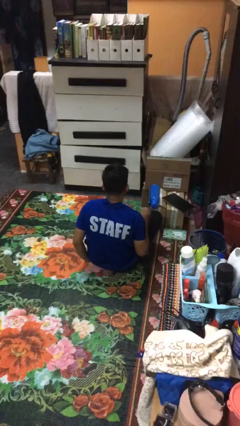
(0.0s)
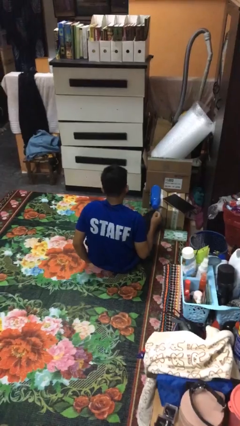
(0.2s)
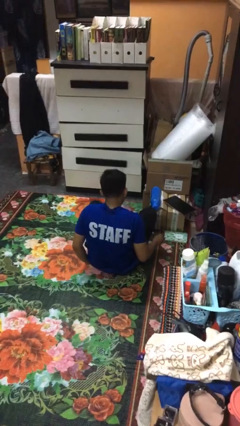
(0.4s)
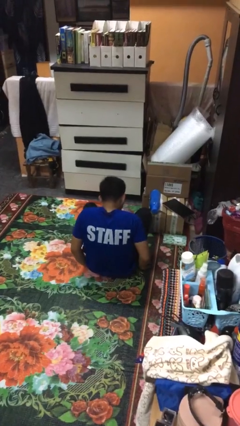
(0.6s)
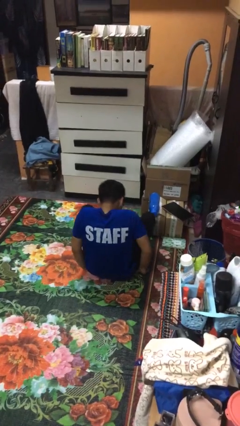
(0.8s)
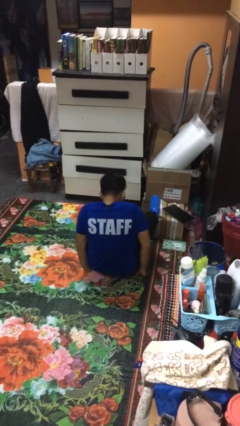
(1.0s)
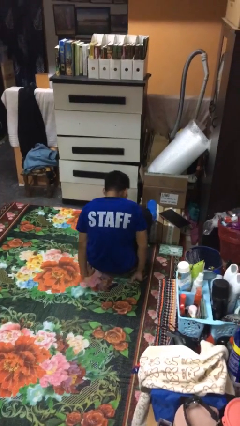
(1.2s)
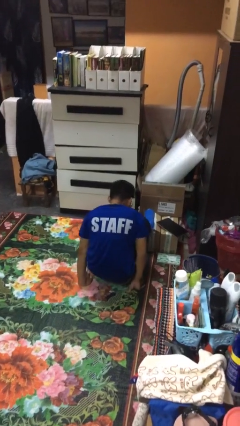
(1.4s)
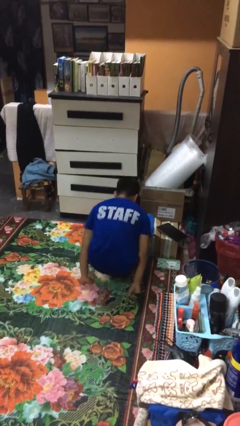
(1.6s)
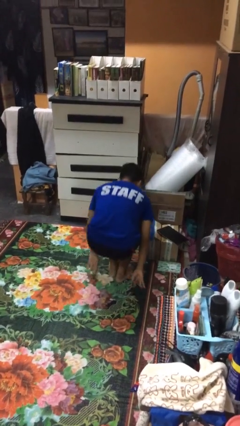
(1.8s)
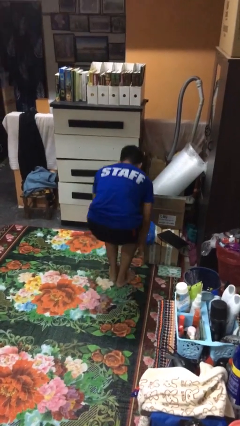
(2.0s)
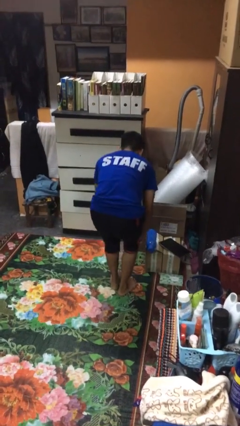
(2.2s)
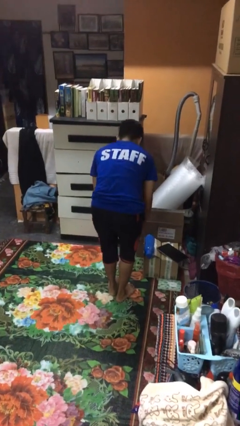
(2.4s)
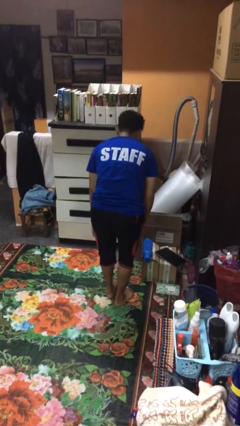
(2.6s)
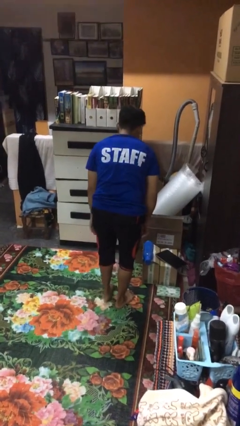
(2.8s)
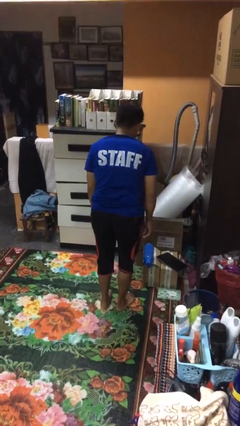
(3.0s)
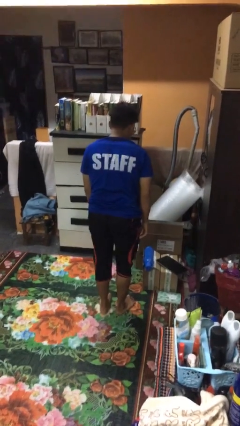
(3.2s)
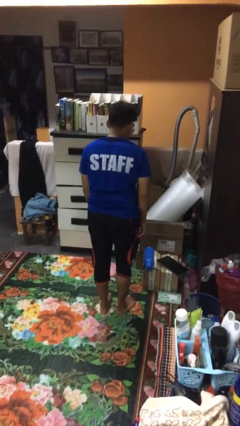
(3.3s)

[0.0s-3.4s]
person stands up from floor

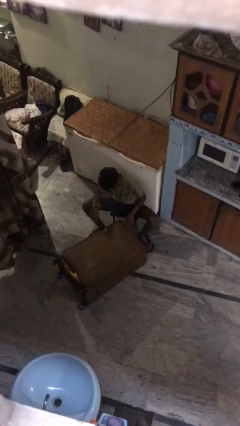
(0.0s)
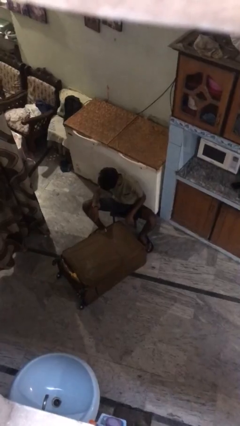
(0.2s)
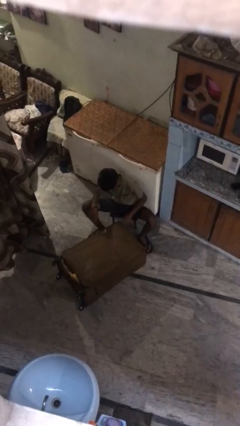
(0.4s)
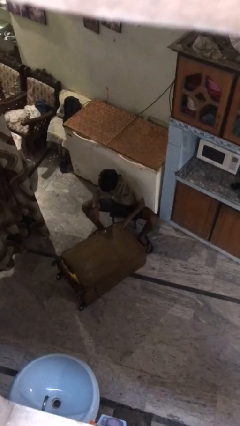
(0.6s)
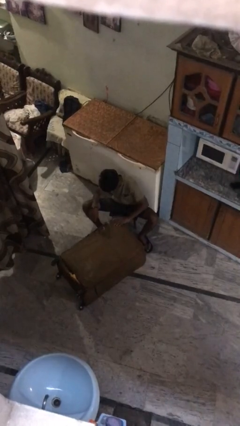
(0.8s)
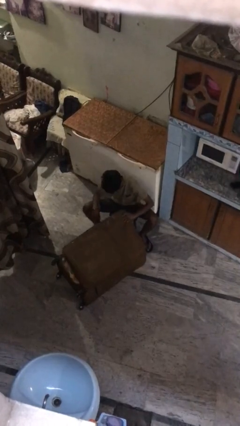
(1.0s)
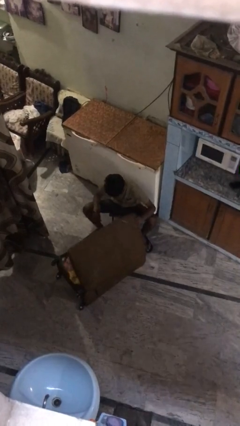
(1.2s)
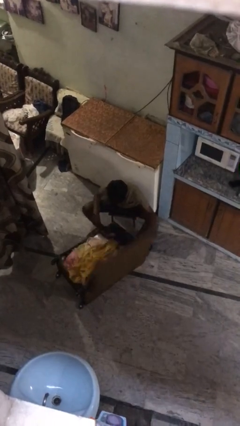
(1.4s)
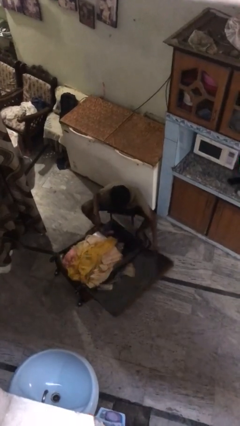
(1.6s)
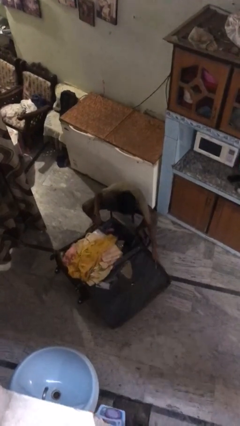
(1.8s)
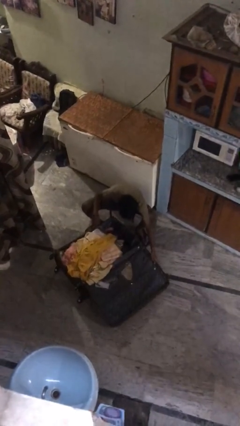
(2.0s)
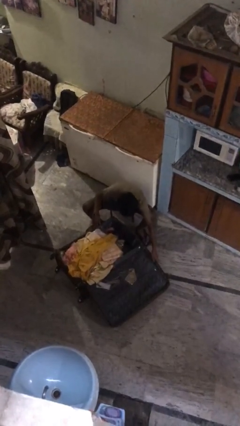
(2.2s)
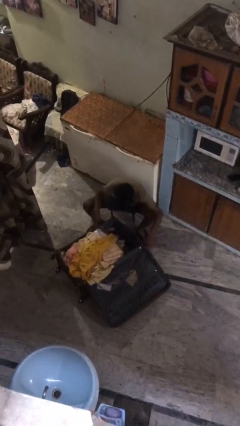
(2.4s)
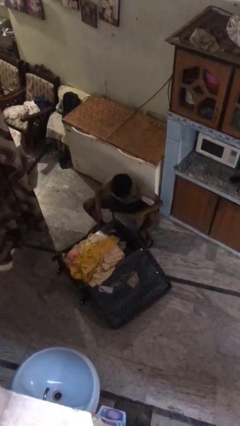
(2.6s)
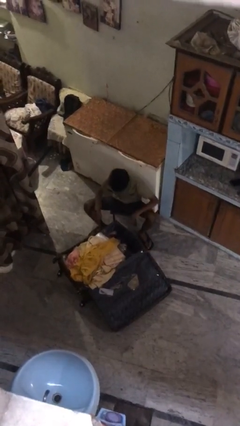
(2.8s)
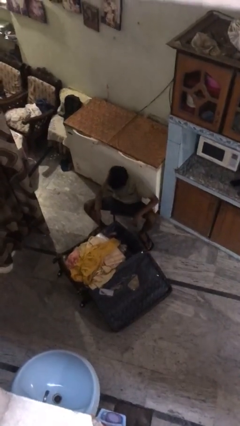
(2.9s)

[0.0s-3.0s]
person opens suitcase

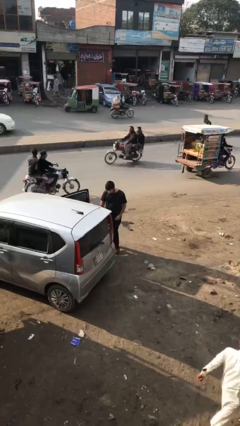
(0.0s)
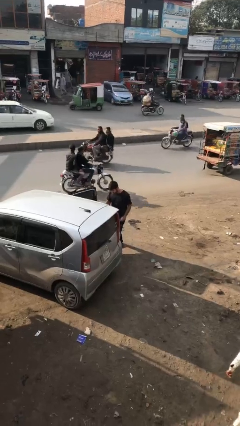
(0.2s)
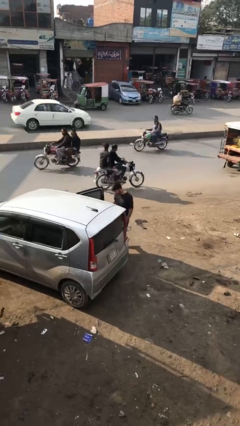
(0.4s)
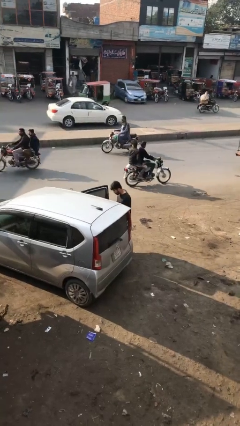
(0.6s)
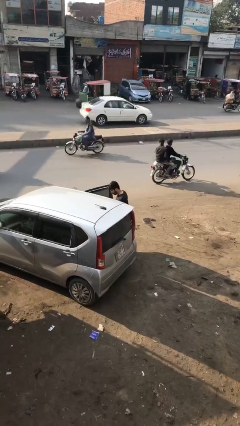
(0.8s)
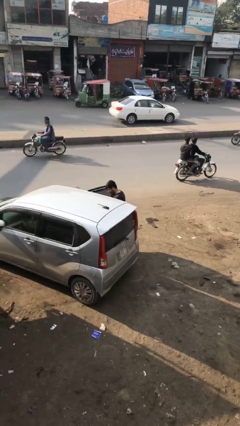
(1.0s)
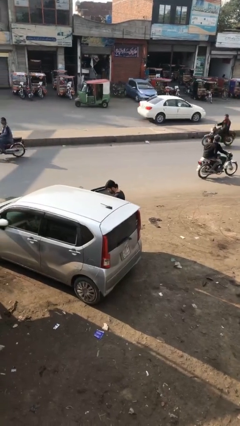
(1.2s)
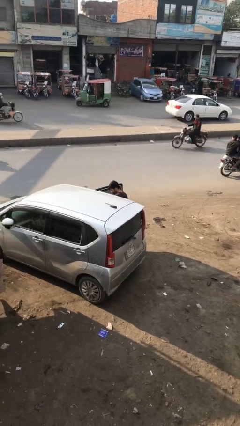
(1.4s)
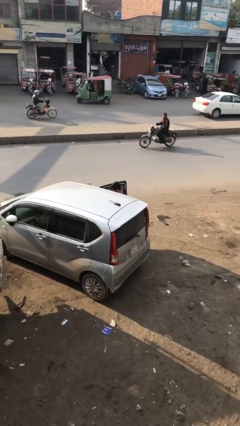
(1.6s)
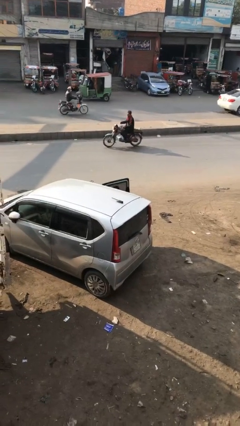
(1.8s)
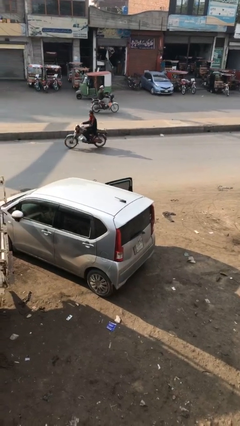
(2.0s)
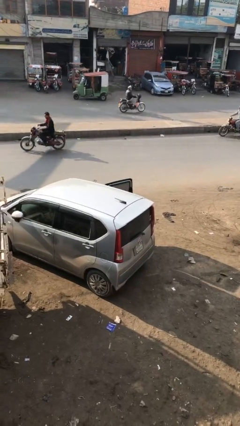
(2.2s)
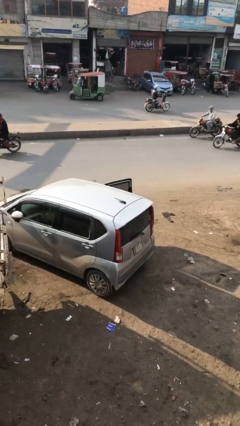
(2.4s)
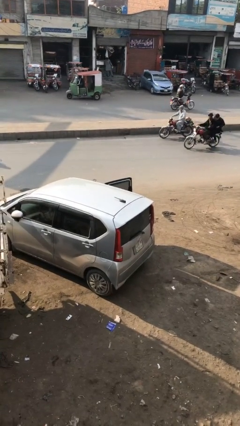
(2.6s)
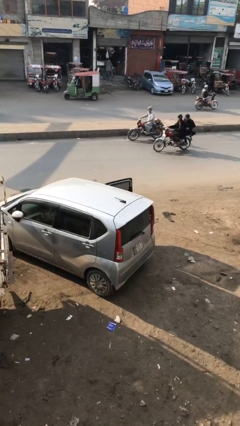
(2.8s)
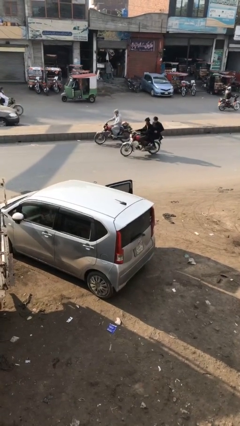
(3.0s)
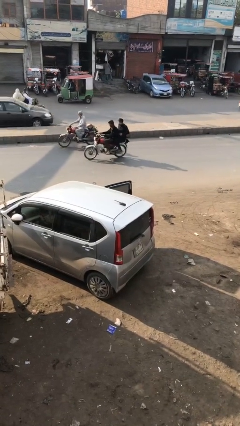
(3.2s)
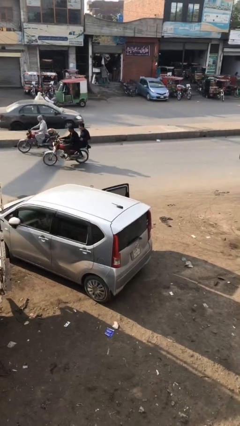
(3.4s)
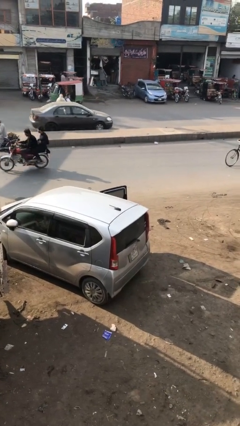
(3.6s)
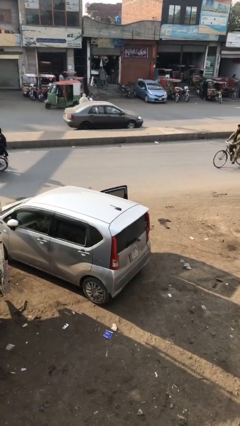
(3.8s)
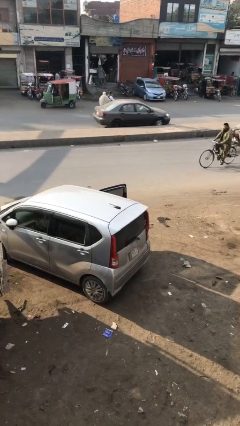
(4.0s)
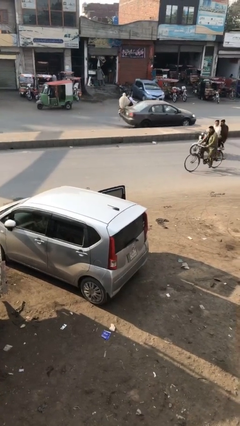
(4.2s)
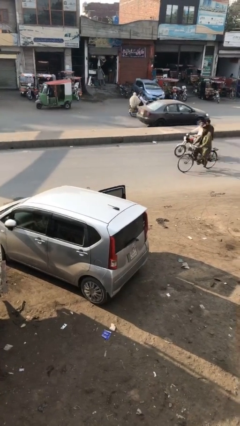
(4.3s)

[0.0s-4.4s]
person enters car

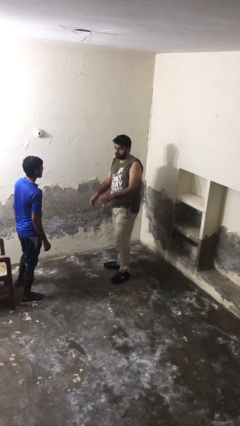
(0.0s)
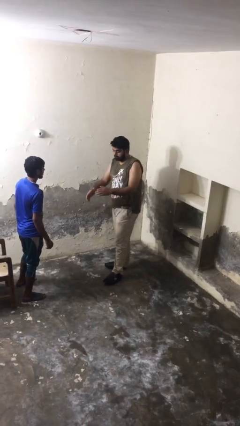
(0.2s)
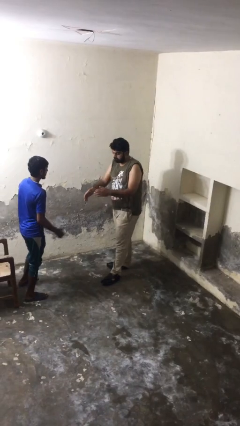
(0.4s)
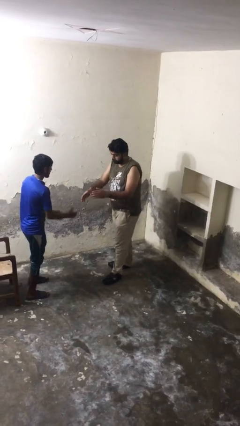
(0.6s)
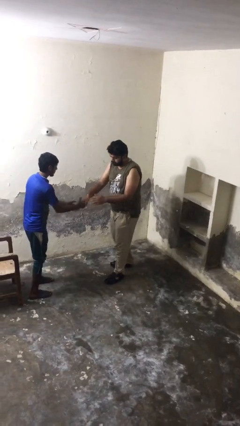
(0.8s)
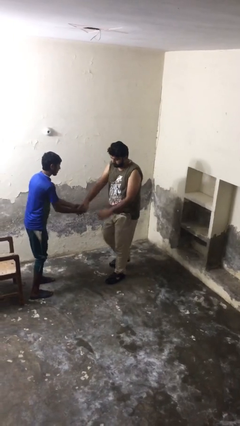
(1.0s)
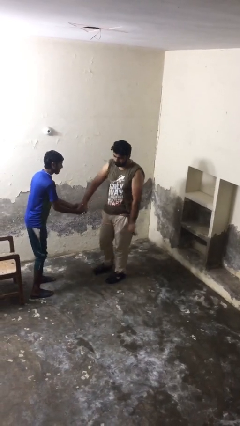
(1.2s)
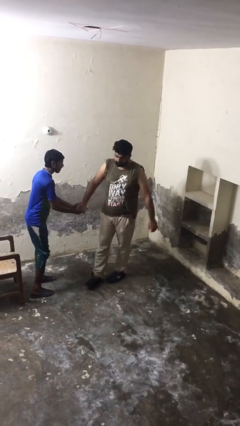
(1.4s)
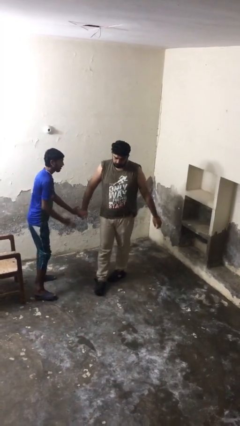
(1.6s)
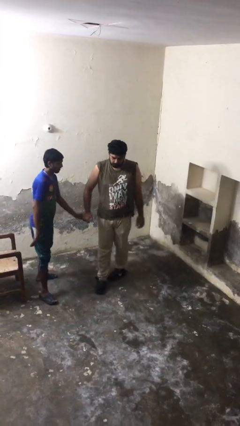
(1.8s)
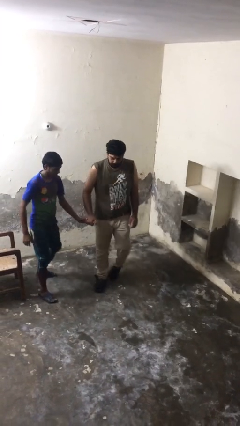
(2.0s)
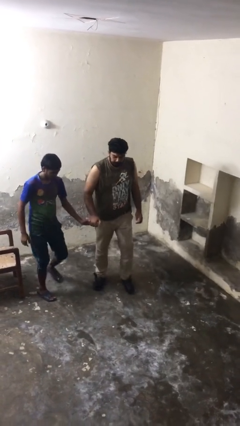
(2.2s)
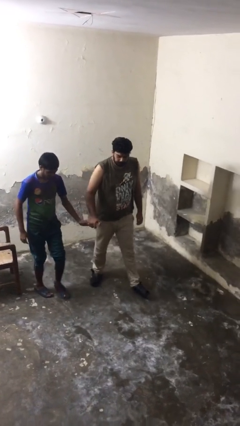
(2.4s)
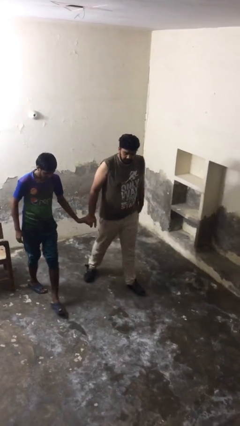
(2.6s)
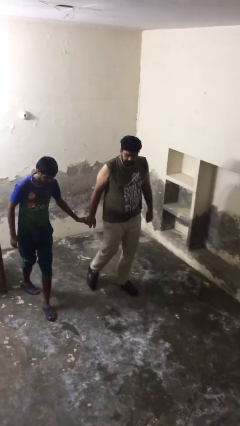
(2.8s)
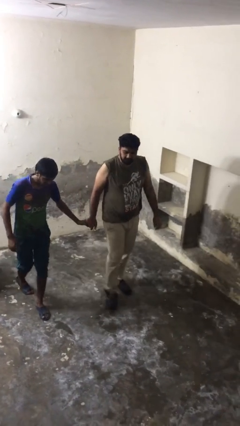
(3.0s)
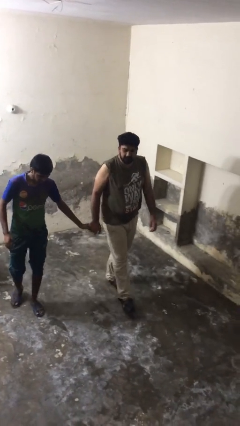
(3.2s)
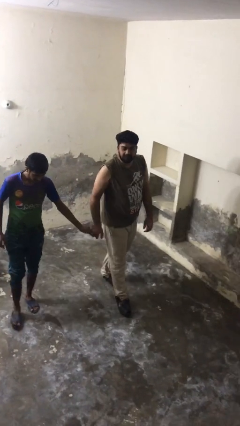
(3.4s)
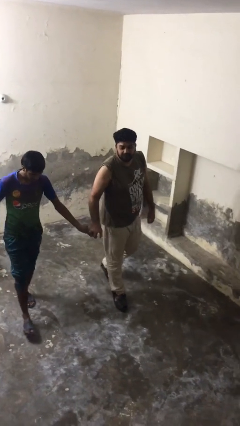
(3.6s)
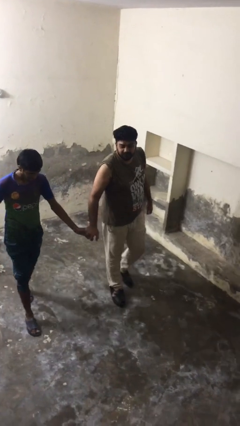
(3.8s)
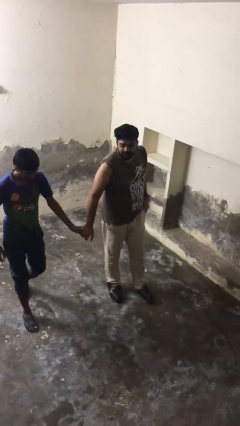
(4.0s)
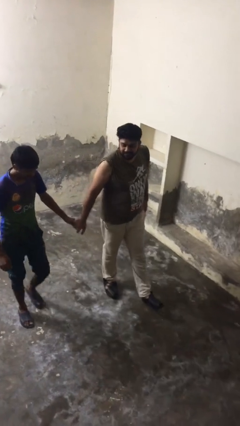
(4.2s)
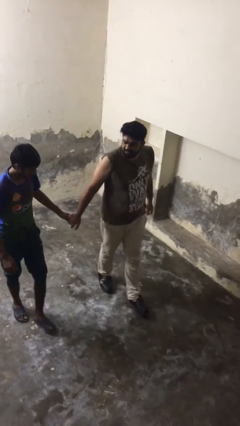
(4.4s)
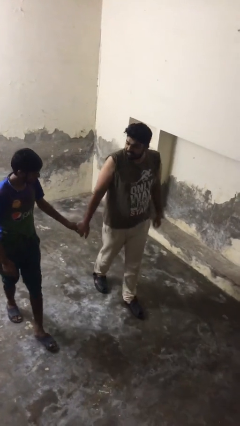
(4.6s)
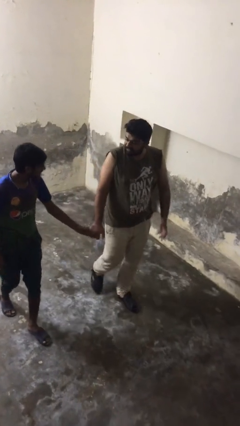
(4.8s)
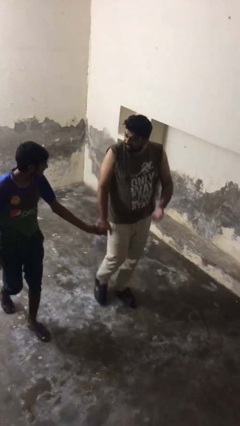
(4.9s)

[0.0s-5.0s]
person holds hand

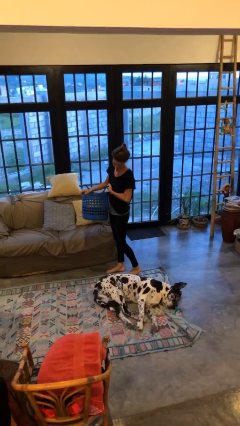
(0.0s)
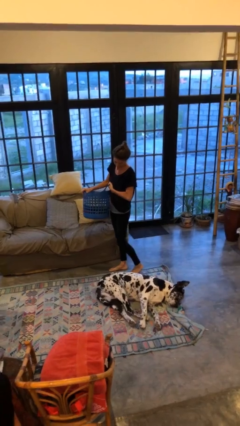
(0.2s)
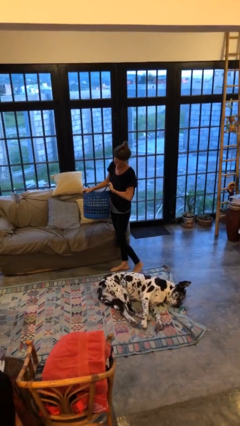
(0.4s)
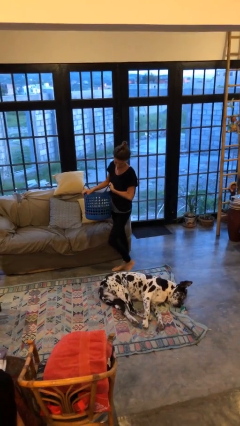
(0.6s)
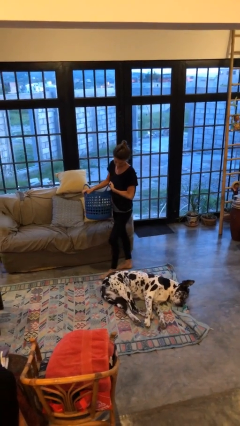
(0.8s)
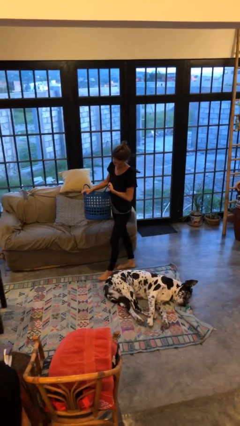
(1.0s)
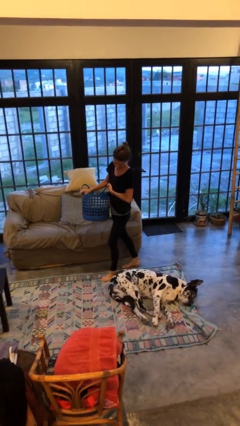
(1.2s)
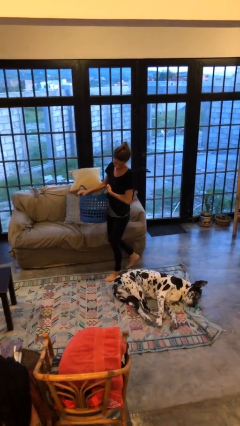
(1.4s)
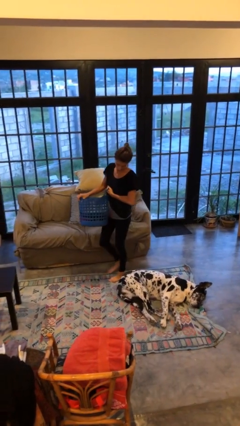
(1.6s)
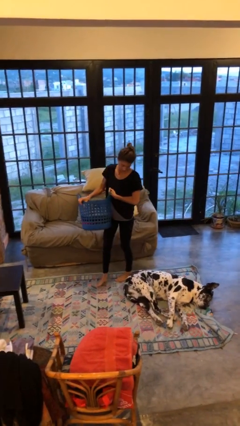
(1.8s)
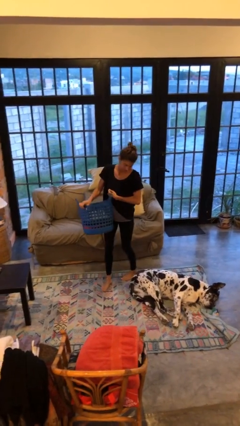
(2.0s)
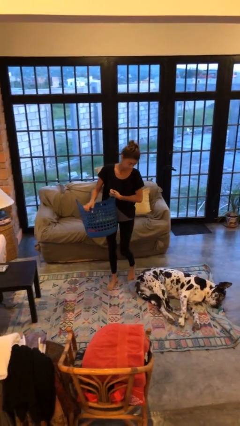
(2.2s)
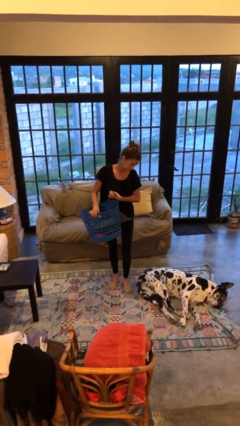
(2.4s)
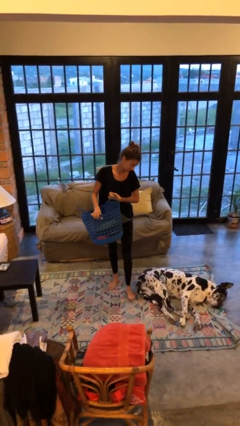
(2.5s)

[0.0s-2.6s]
person carries laundry basket
